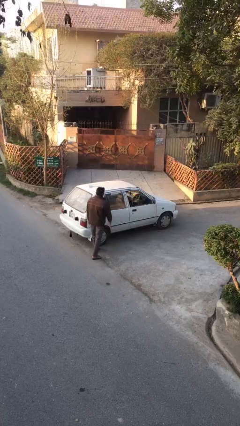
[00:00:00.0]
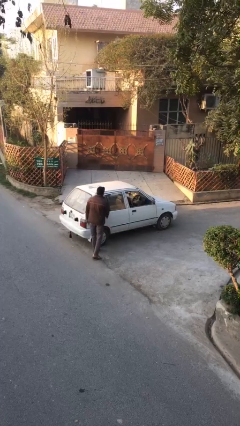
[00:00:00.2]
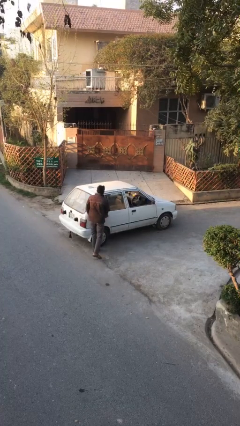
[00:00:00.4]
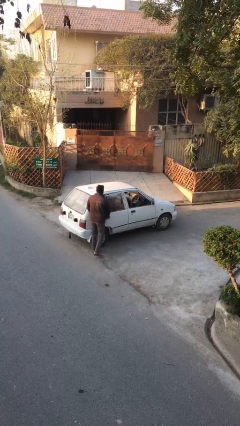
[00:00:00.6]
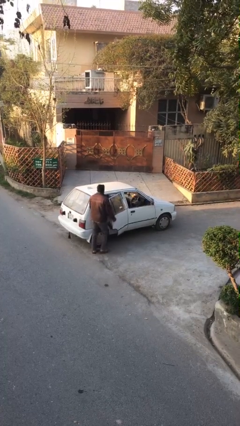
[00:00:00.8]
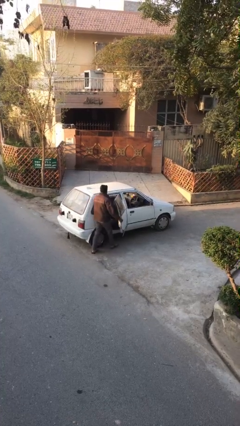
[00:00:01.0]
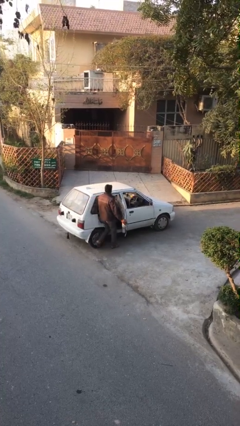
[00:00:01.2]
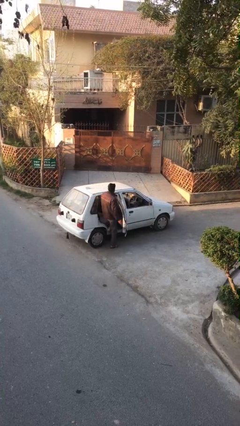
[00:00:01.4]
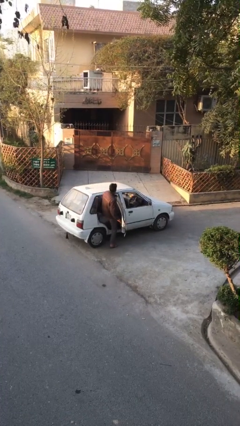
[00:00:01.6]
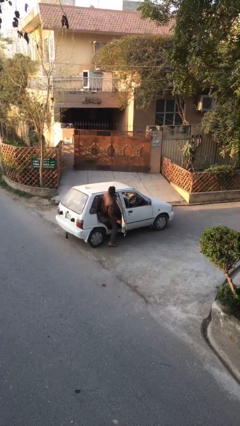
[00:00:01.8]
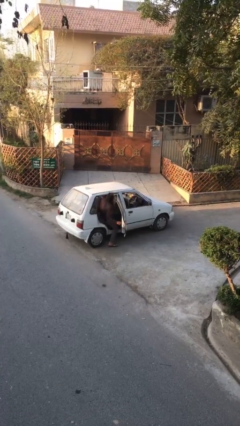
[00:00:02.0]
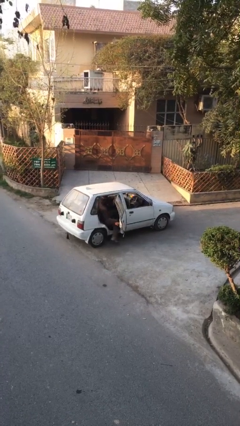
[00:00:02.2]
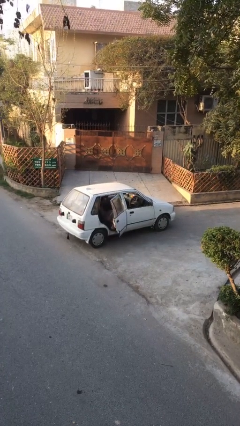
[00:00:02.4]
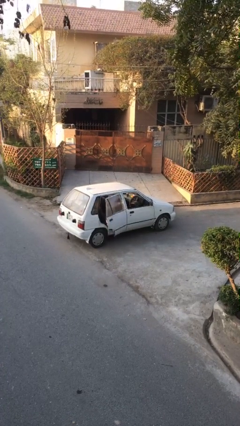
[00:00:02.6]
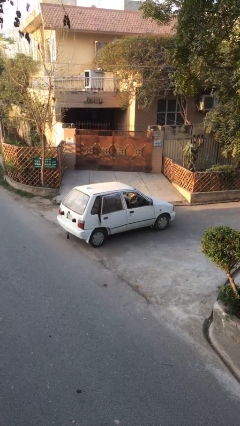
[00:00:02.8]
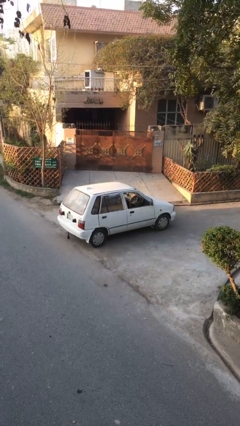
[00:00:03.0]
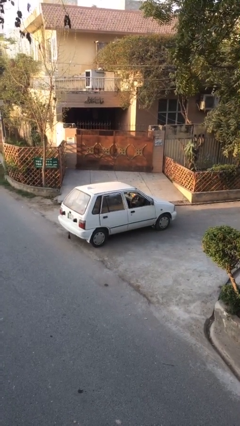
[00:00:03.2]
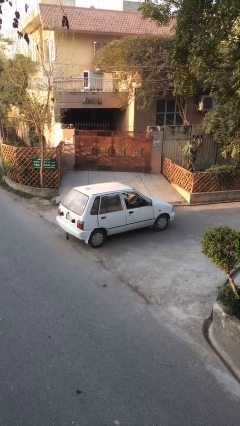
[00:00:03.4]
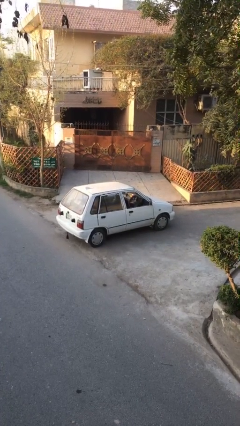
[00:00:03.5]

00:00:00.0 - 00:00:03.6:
car picks up person

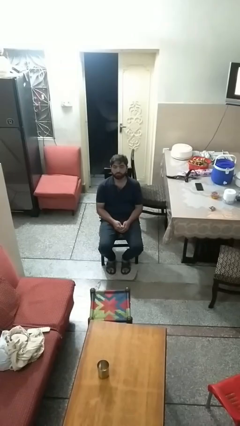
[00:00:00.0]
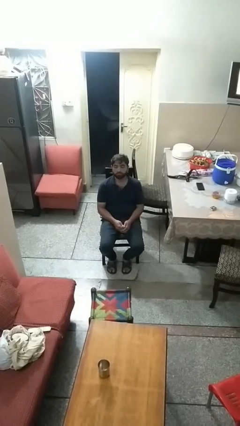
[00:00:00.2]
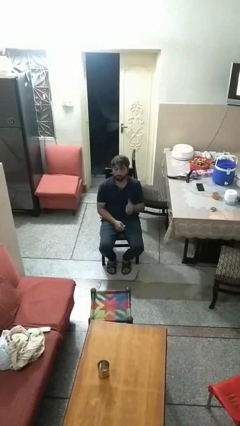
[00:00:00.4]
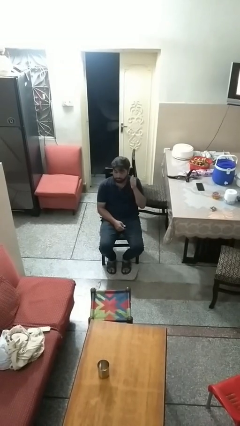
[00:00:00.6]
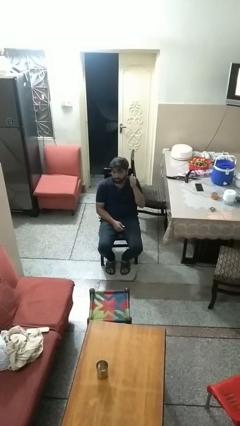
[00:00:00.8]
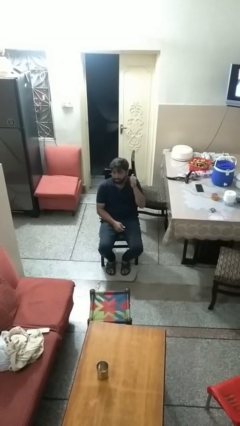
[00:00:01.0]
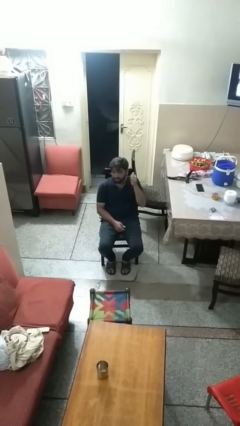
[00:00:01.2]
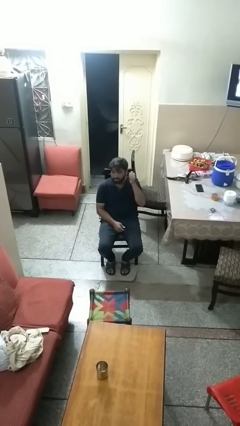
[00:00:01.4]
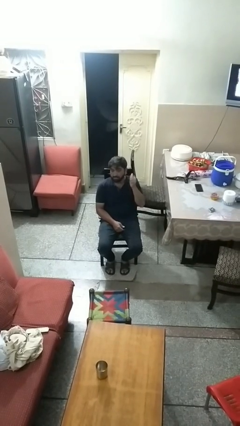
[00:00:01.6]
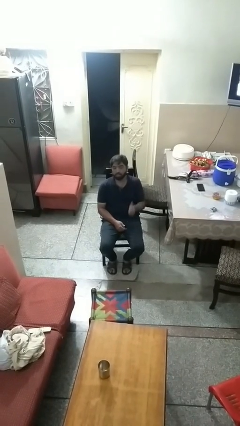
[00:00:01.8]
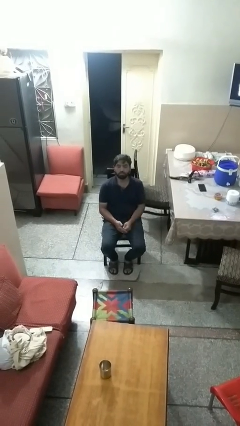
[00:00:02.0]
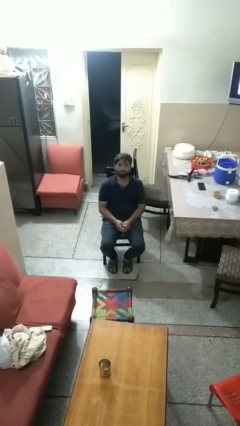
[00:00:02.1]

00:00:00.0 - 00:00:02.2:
person gestures behind me

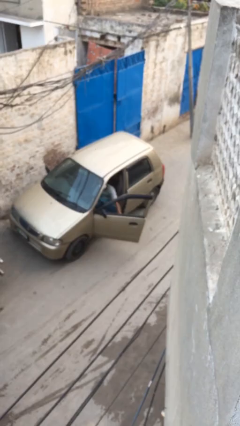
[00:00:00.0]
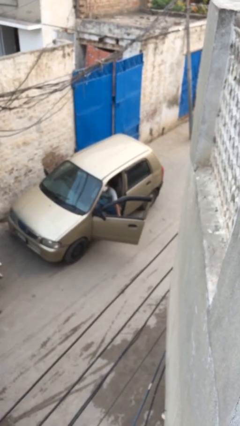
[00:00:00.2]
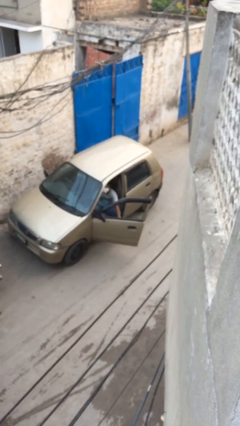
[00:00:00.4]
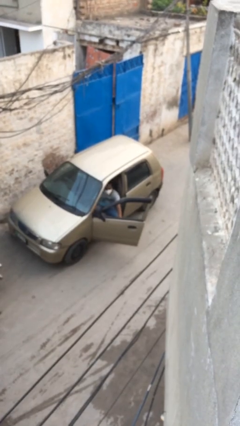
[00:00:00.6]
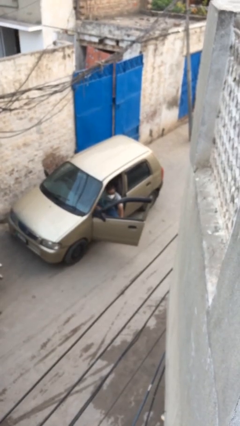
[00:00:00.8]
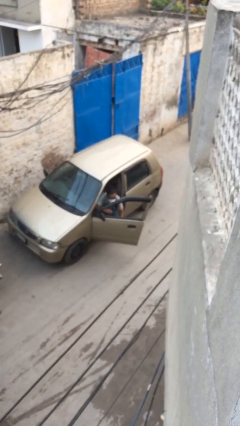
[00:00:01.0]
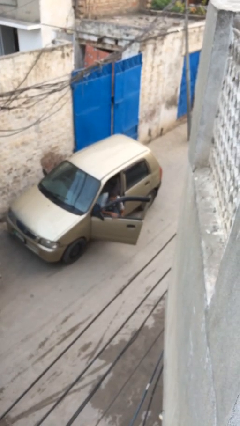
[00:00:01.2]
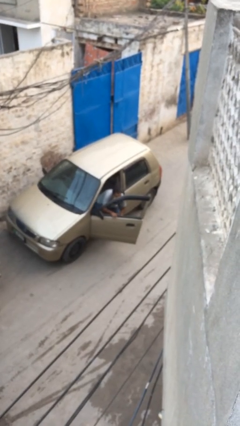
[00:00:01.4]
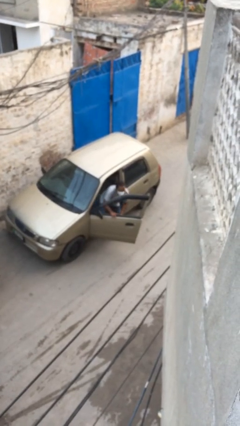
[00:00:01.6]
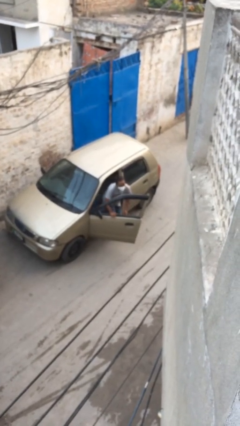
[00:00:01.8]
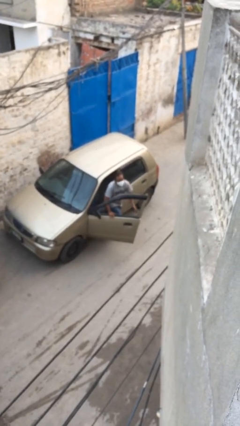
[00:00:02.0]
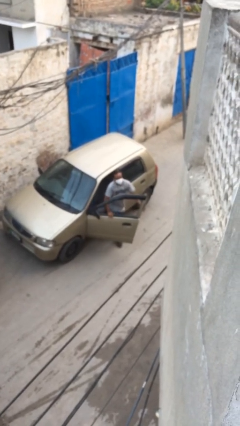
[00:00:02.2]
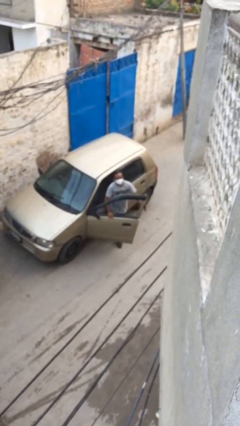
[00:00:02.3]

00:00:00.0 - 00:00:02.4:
person exits car

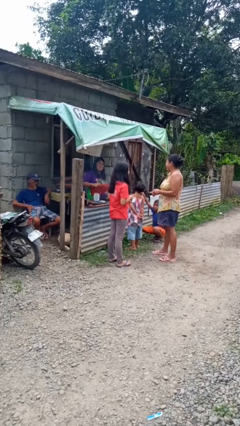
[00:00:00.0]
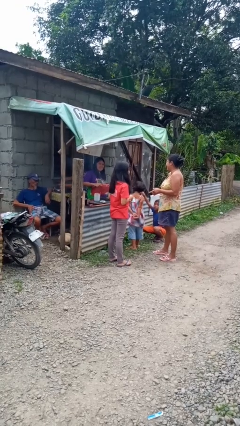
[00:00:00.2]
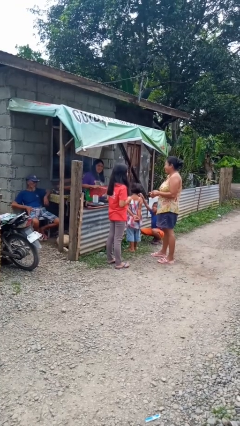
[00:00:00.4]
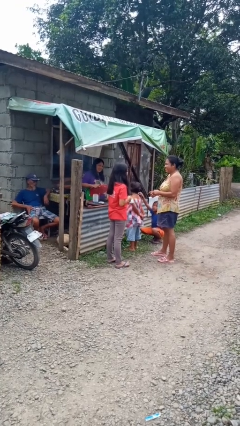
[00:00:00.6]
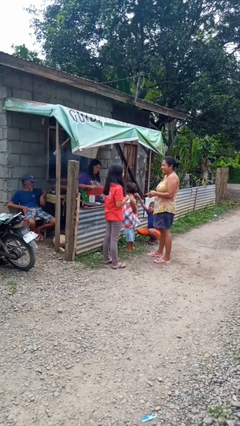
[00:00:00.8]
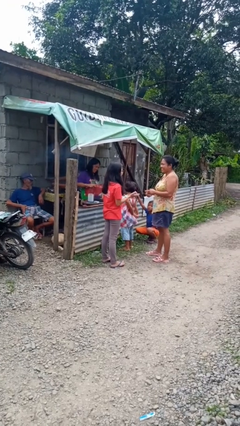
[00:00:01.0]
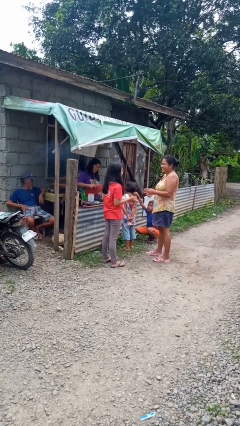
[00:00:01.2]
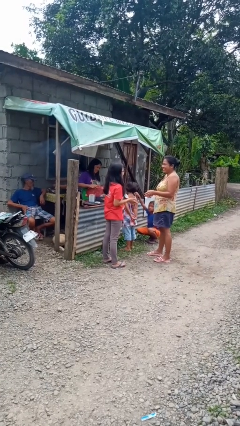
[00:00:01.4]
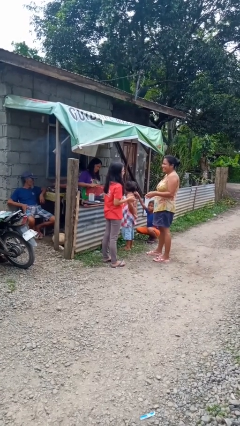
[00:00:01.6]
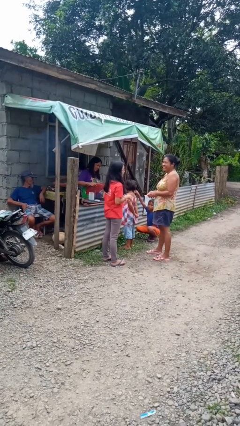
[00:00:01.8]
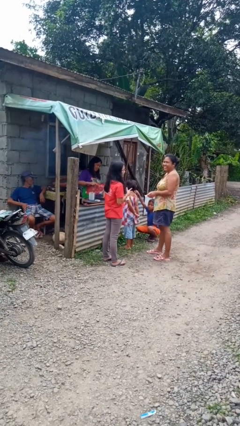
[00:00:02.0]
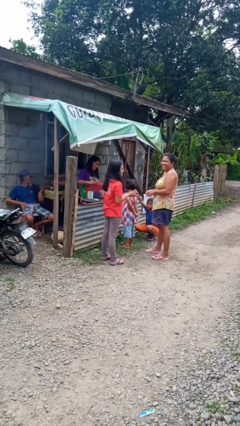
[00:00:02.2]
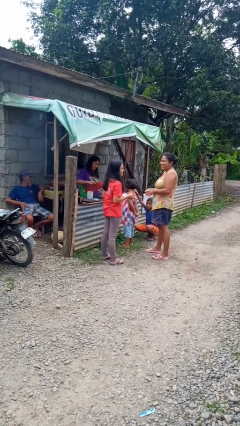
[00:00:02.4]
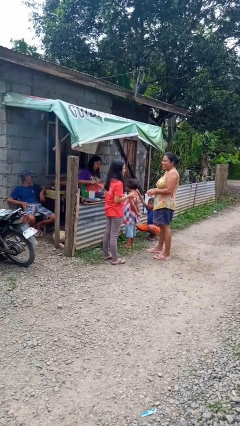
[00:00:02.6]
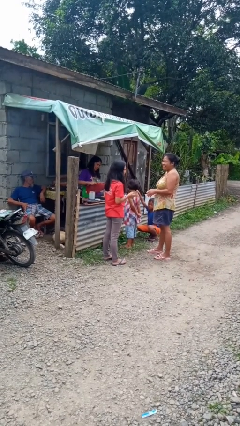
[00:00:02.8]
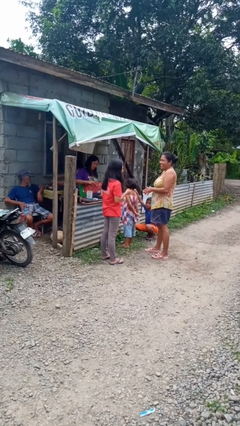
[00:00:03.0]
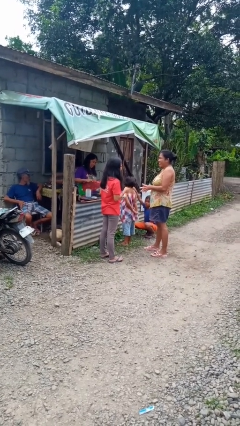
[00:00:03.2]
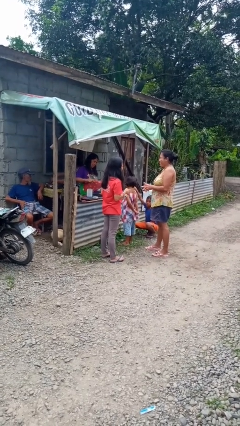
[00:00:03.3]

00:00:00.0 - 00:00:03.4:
person talks to person

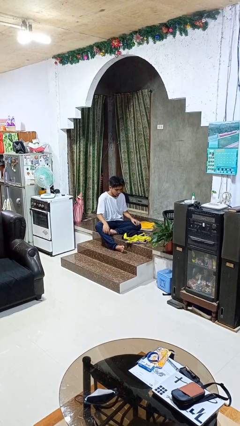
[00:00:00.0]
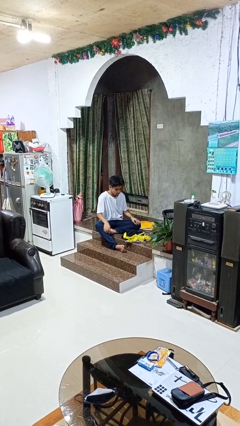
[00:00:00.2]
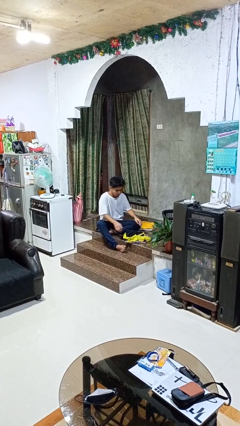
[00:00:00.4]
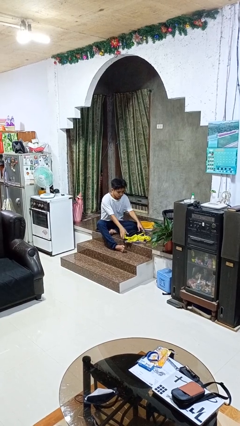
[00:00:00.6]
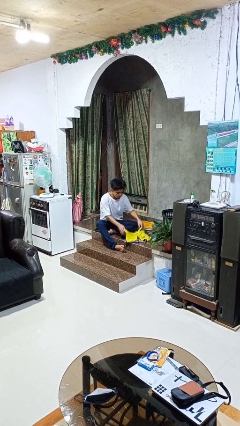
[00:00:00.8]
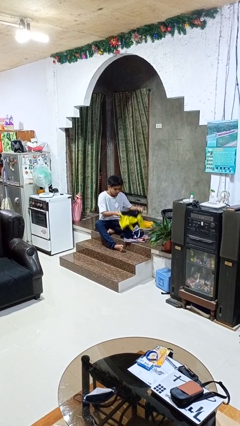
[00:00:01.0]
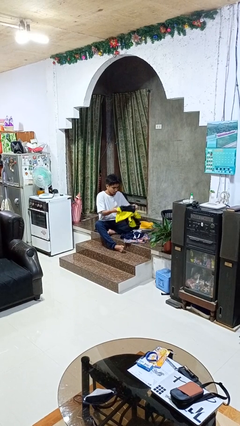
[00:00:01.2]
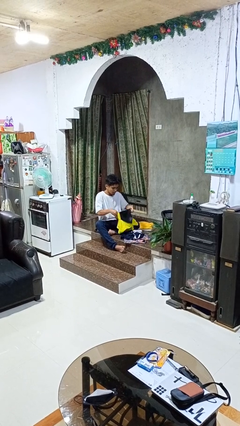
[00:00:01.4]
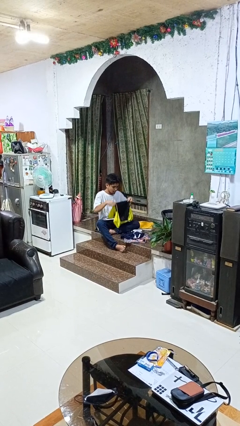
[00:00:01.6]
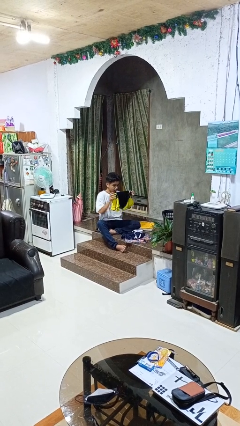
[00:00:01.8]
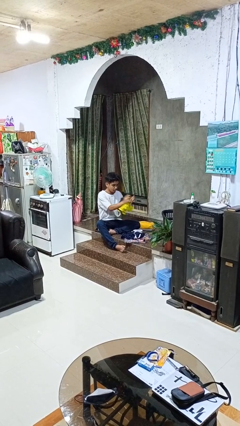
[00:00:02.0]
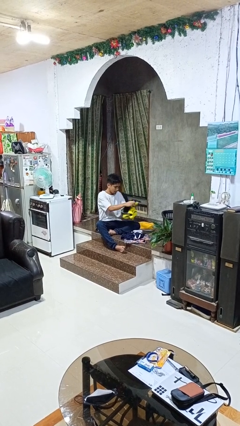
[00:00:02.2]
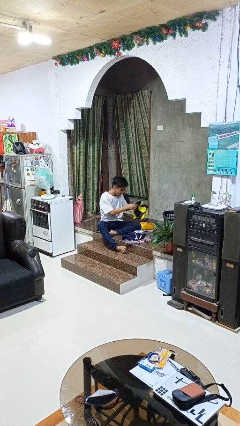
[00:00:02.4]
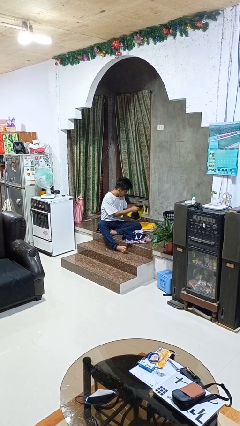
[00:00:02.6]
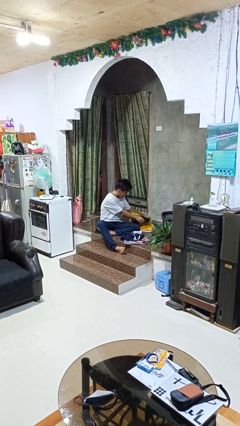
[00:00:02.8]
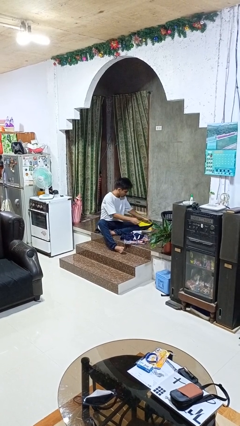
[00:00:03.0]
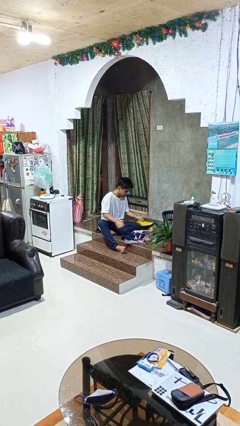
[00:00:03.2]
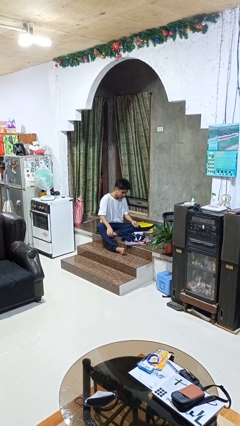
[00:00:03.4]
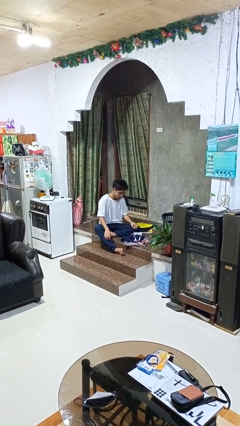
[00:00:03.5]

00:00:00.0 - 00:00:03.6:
person folds shirt

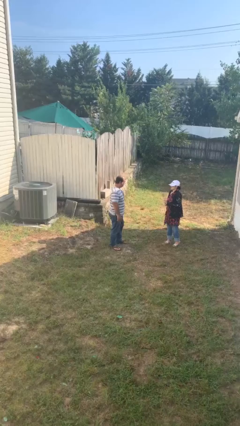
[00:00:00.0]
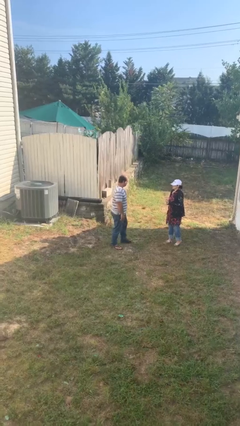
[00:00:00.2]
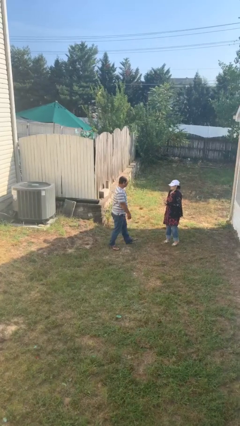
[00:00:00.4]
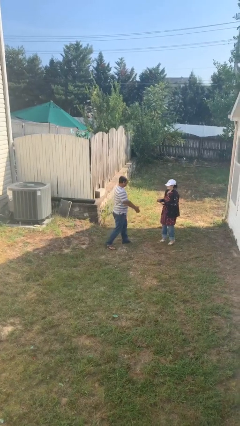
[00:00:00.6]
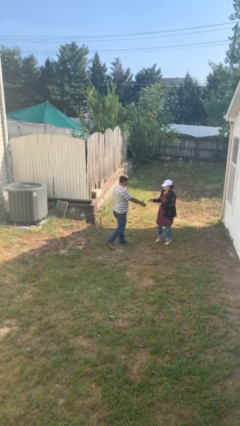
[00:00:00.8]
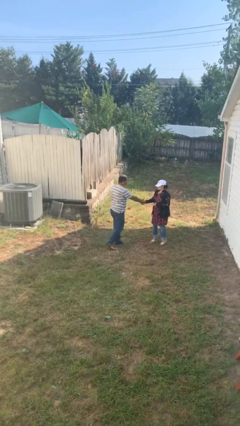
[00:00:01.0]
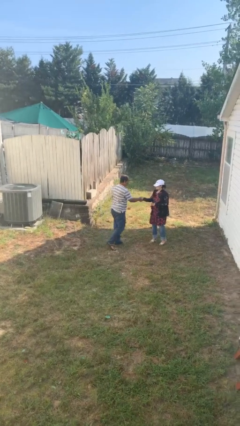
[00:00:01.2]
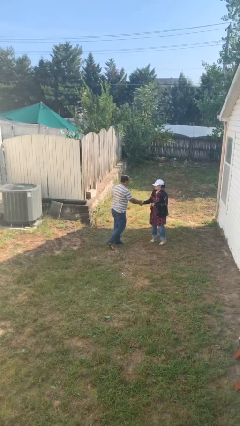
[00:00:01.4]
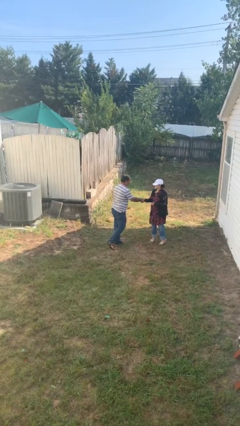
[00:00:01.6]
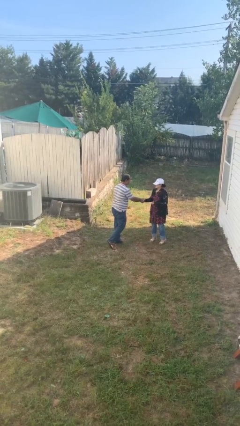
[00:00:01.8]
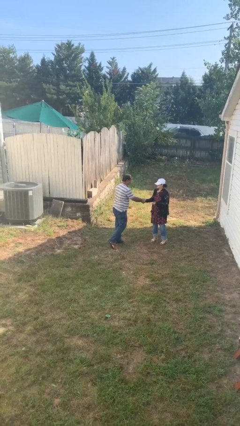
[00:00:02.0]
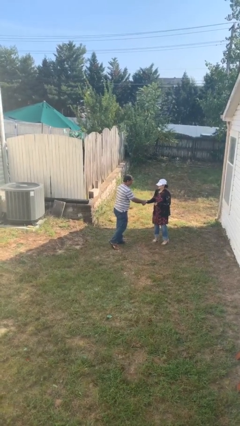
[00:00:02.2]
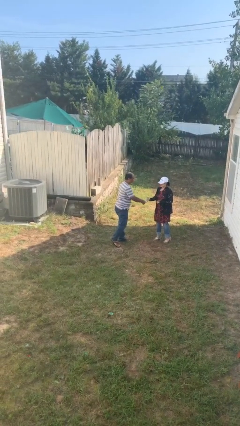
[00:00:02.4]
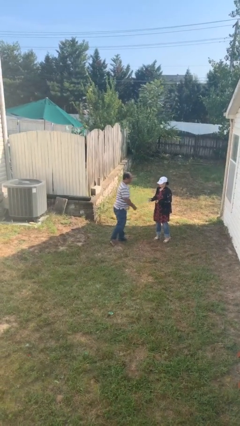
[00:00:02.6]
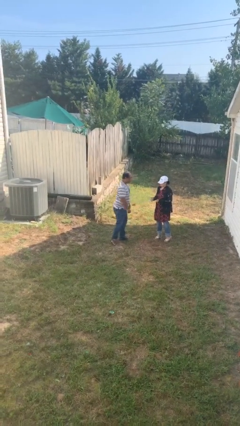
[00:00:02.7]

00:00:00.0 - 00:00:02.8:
person shakes hand
